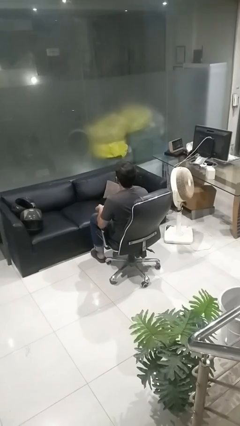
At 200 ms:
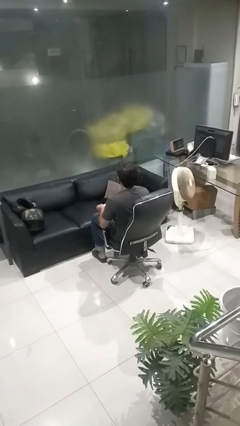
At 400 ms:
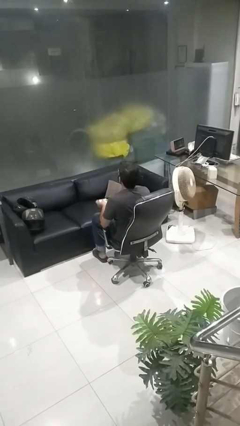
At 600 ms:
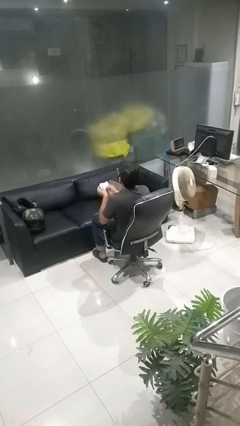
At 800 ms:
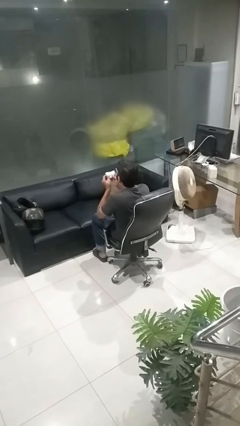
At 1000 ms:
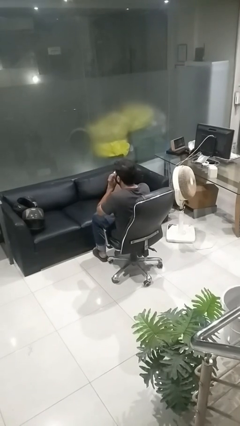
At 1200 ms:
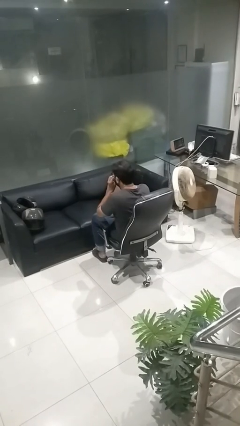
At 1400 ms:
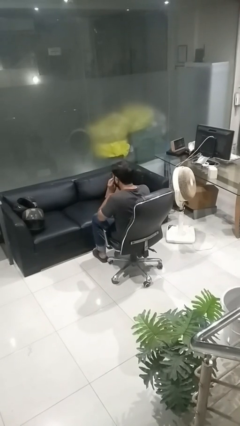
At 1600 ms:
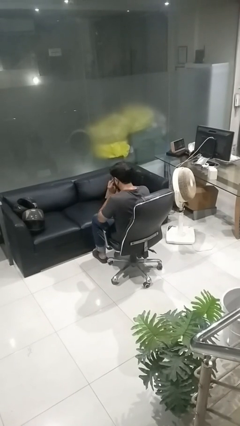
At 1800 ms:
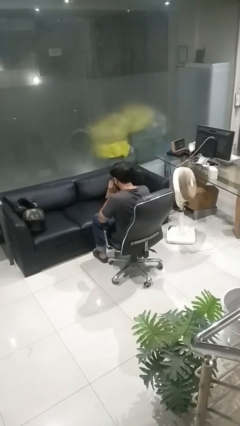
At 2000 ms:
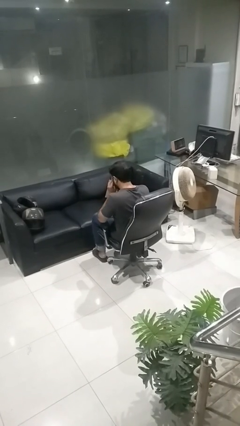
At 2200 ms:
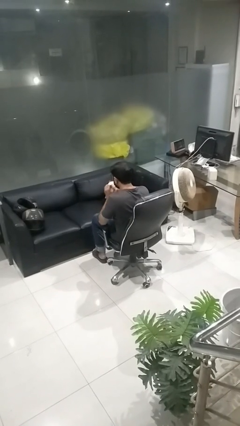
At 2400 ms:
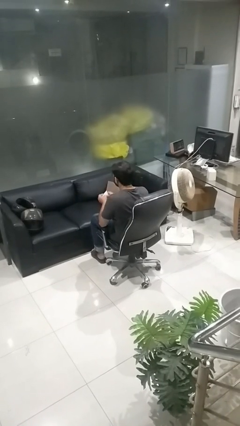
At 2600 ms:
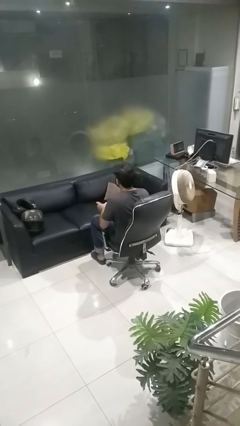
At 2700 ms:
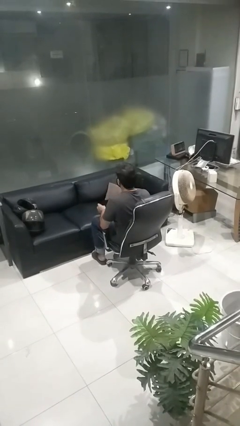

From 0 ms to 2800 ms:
person blows nose

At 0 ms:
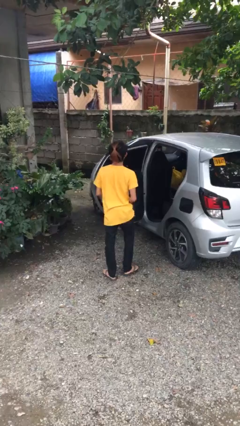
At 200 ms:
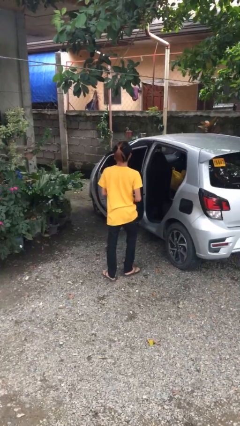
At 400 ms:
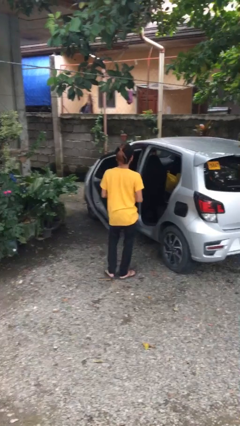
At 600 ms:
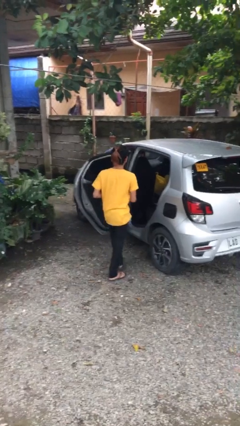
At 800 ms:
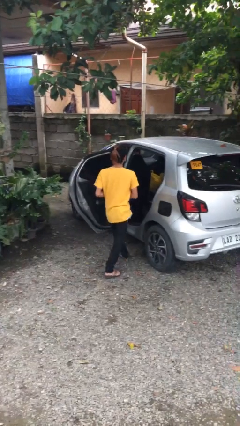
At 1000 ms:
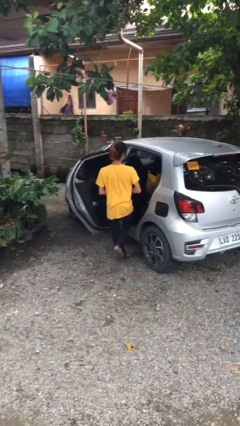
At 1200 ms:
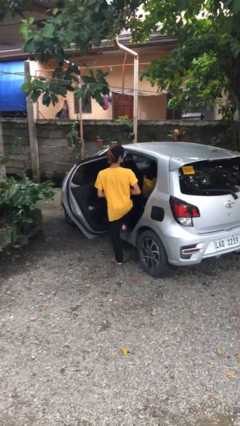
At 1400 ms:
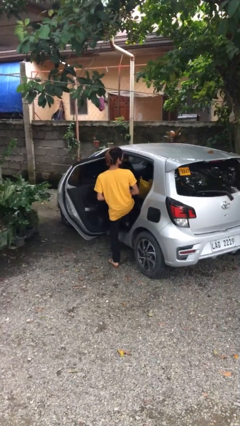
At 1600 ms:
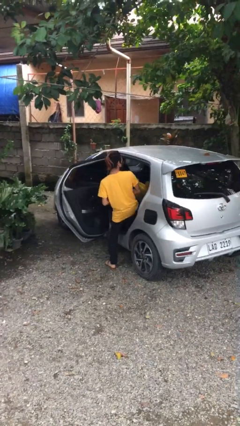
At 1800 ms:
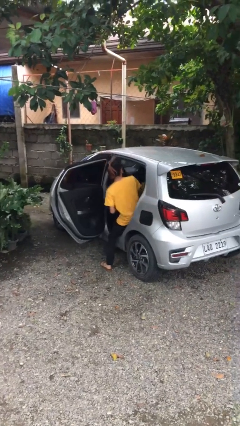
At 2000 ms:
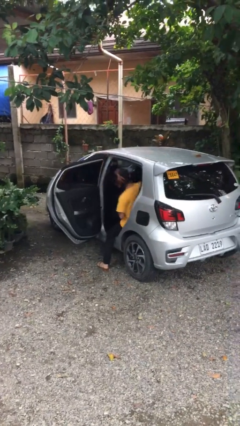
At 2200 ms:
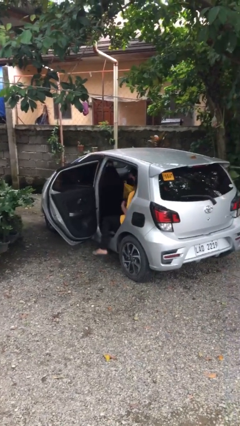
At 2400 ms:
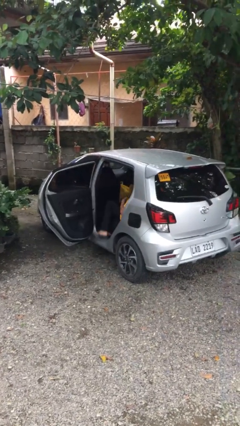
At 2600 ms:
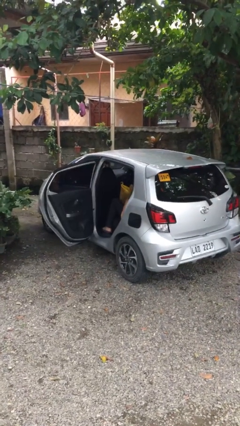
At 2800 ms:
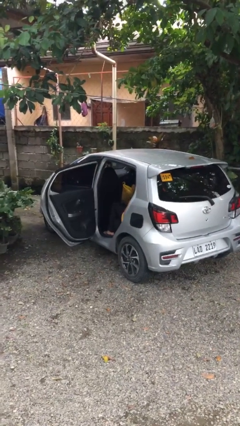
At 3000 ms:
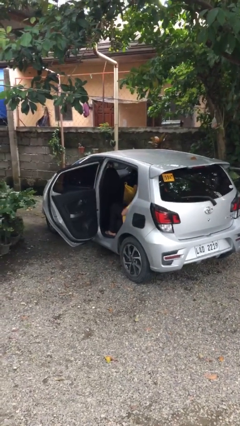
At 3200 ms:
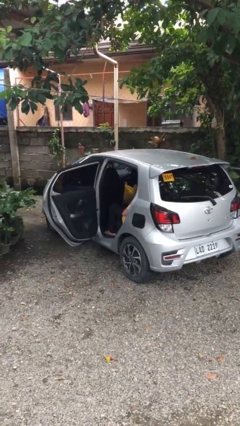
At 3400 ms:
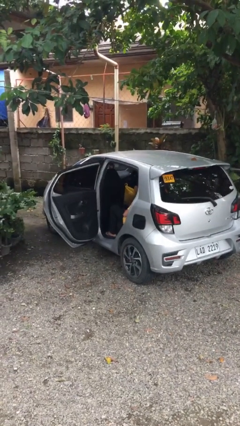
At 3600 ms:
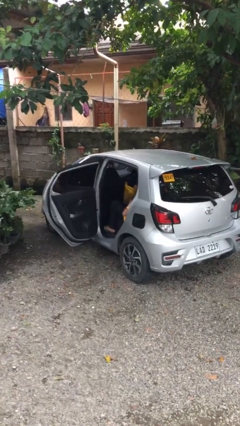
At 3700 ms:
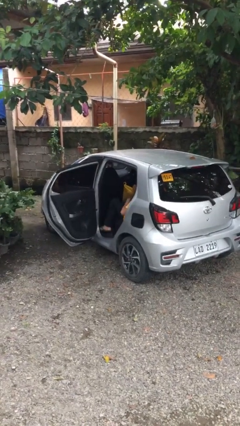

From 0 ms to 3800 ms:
person enters car

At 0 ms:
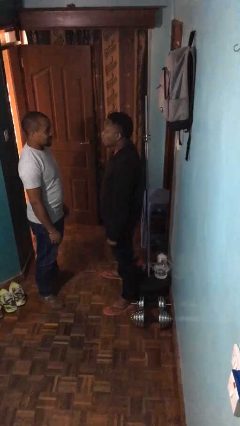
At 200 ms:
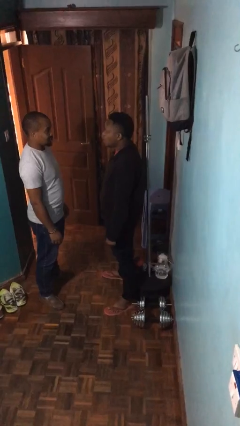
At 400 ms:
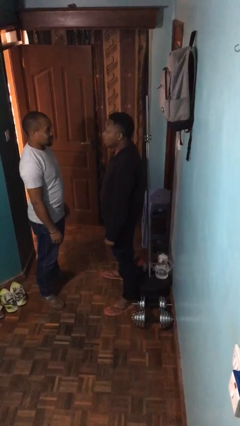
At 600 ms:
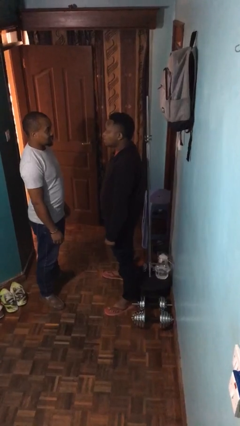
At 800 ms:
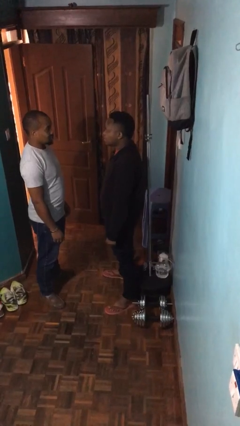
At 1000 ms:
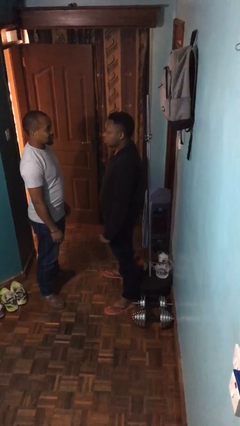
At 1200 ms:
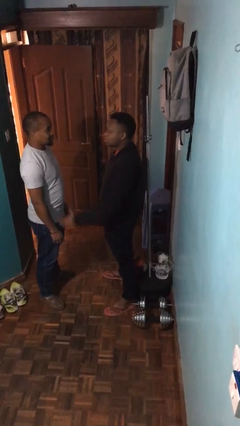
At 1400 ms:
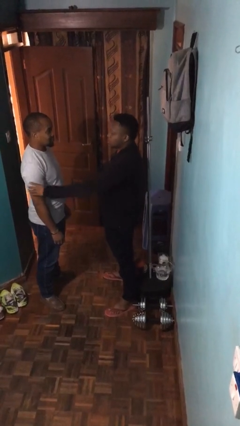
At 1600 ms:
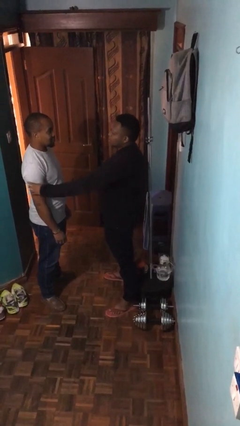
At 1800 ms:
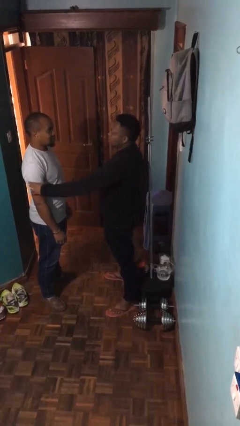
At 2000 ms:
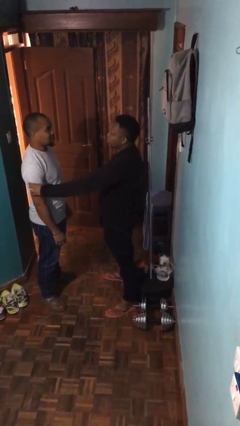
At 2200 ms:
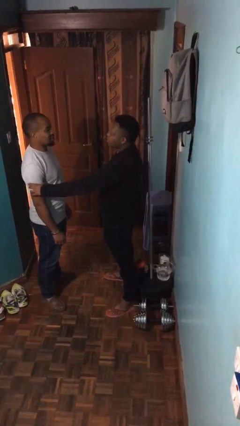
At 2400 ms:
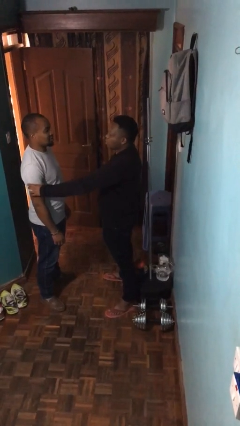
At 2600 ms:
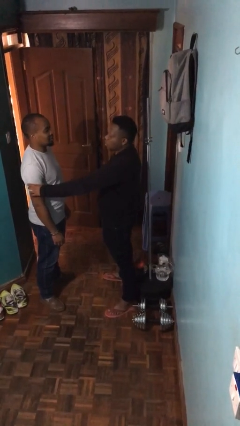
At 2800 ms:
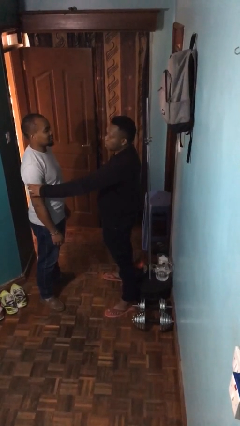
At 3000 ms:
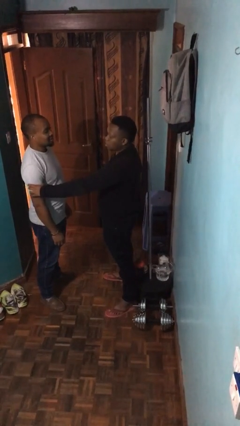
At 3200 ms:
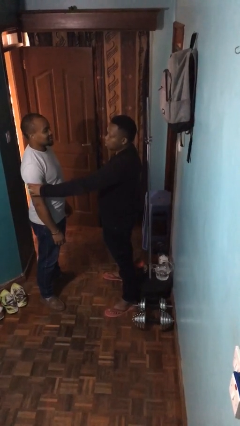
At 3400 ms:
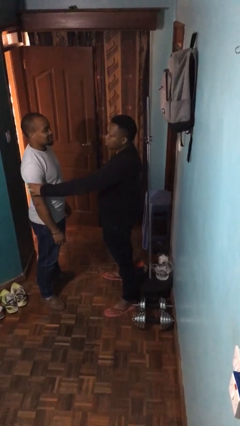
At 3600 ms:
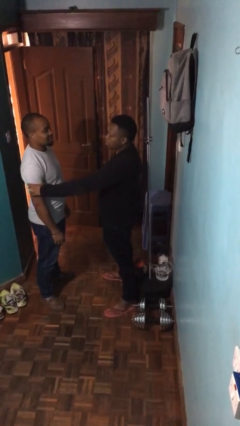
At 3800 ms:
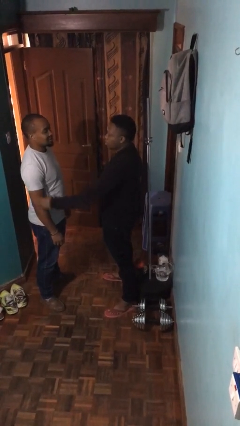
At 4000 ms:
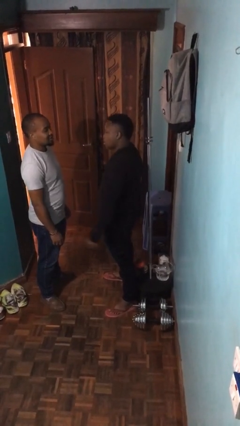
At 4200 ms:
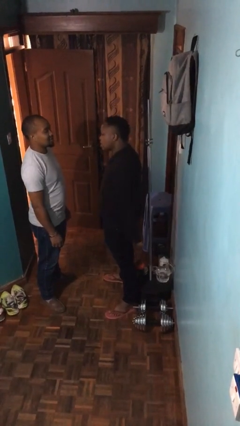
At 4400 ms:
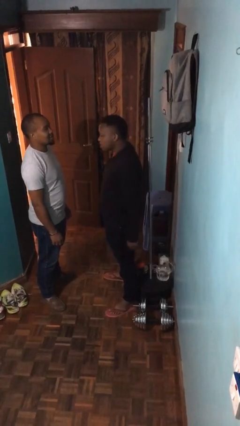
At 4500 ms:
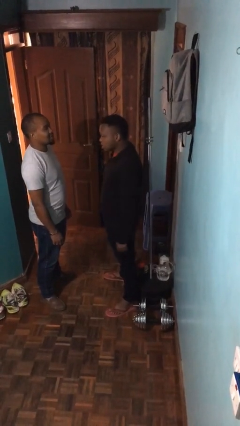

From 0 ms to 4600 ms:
person grabs person by bicep

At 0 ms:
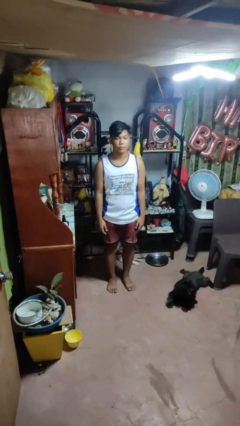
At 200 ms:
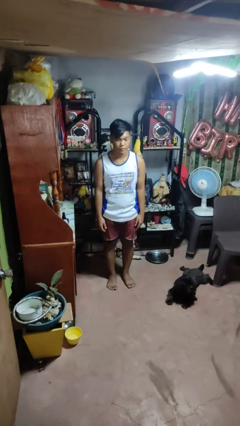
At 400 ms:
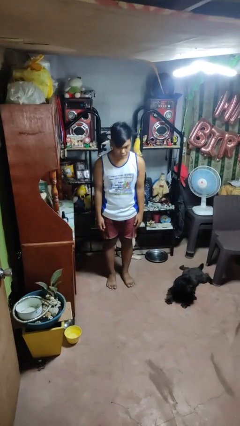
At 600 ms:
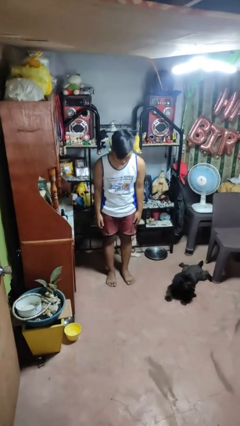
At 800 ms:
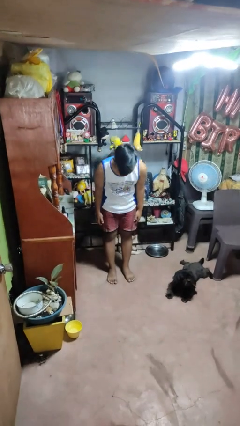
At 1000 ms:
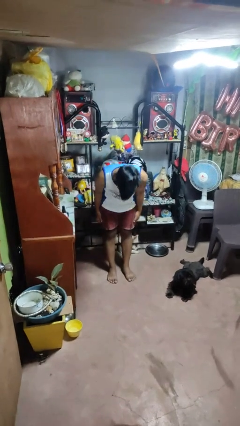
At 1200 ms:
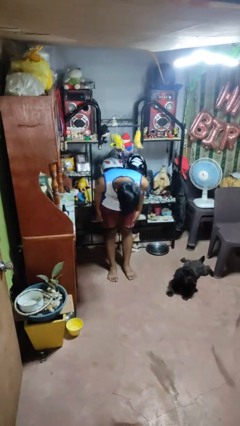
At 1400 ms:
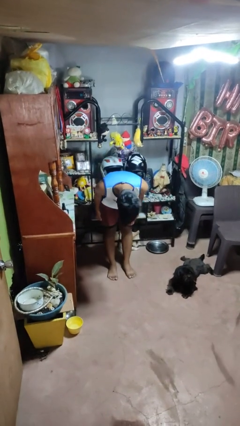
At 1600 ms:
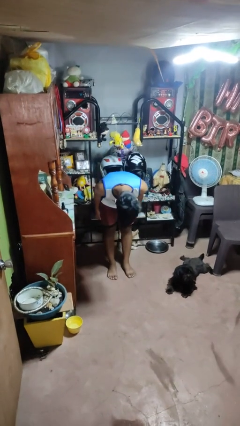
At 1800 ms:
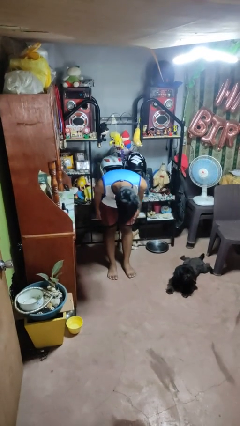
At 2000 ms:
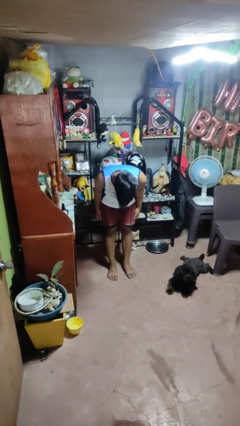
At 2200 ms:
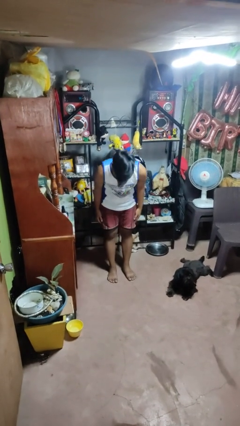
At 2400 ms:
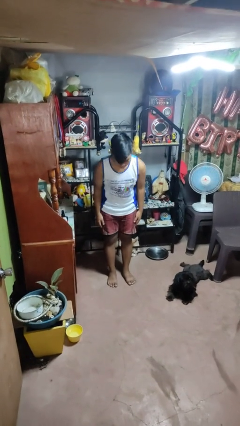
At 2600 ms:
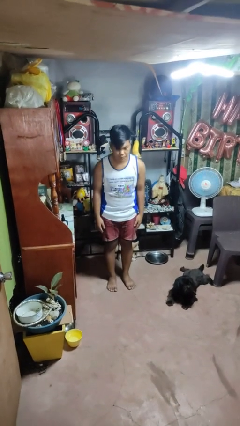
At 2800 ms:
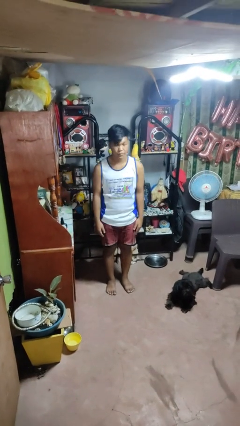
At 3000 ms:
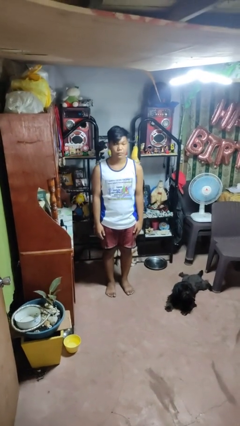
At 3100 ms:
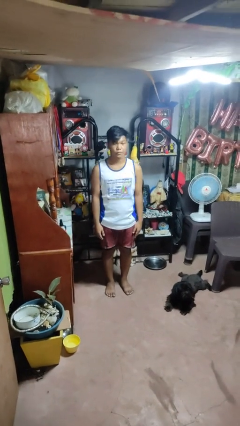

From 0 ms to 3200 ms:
person bows

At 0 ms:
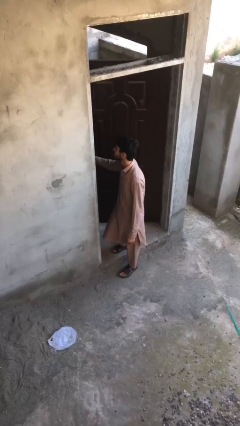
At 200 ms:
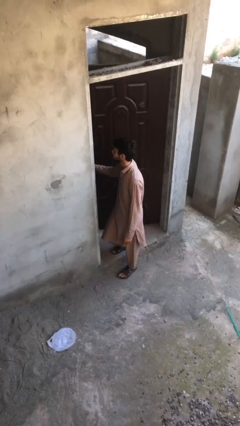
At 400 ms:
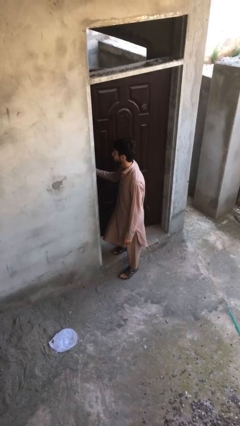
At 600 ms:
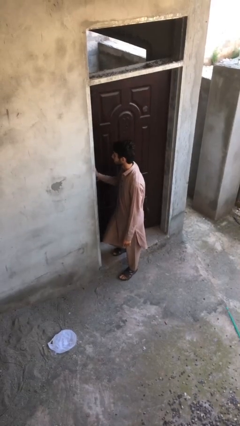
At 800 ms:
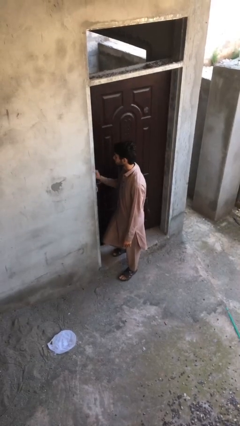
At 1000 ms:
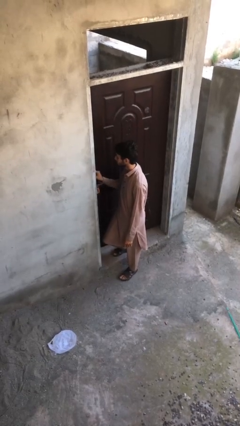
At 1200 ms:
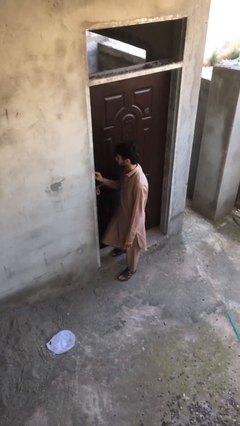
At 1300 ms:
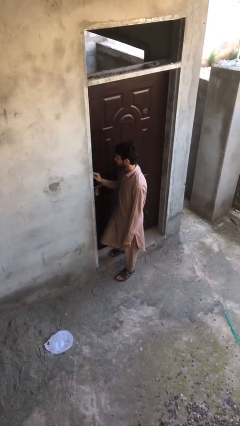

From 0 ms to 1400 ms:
person closes facility door

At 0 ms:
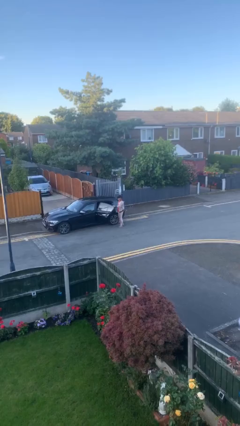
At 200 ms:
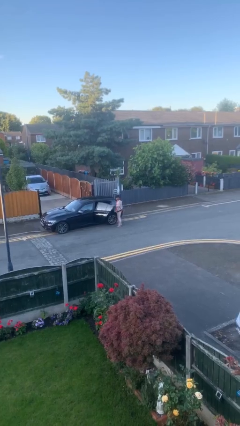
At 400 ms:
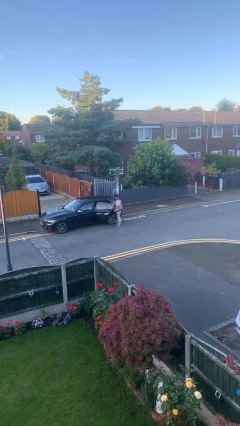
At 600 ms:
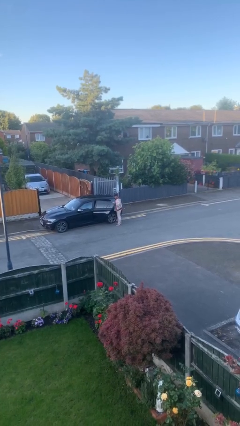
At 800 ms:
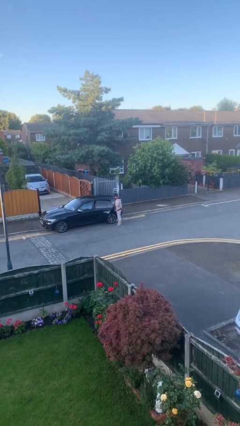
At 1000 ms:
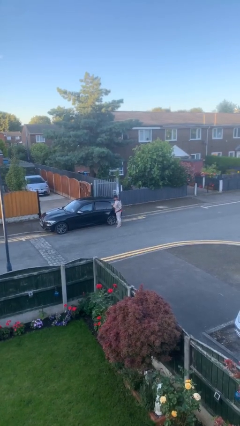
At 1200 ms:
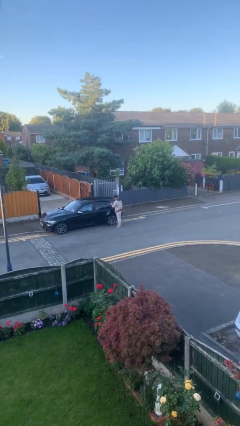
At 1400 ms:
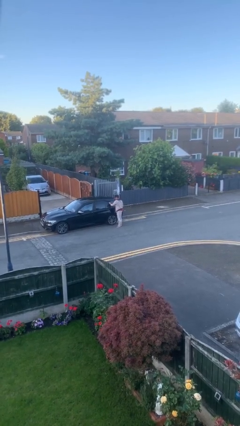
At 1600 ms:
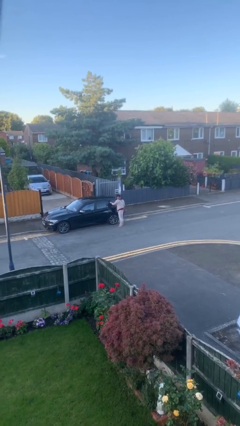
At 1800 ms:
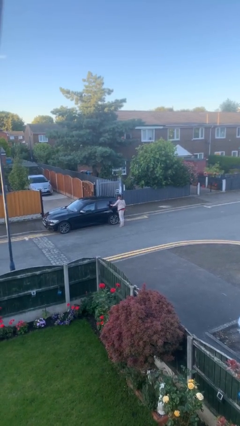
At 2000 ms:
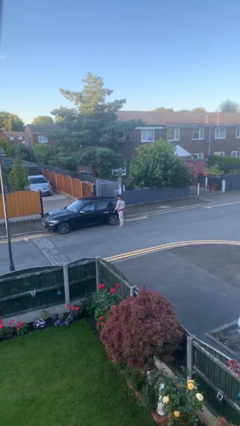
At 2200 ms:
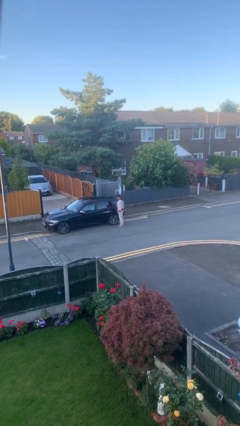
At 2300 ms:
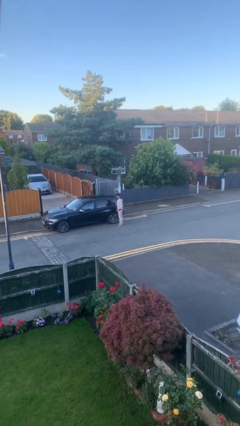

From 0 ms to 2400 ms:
person closes car door
